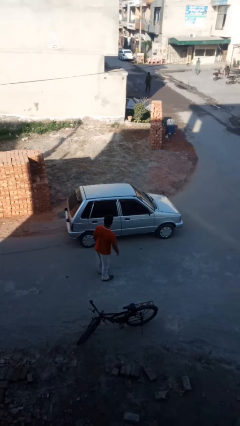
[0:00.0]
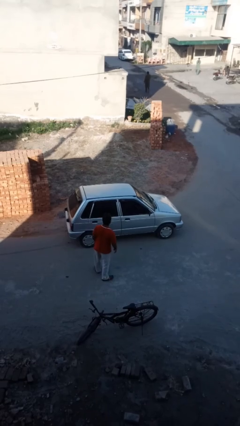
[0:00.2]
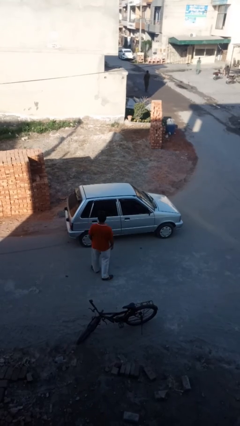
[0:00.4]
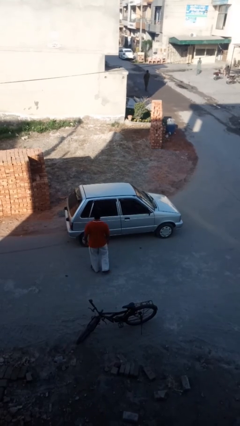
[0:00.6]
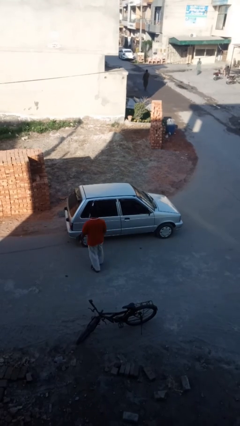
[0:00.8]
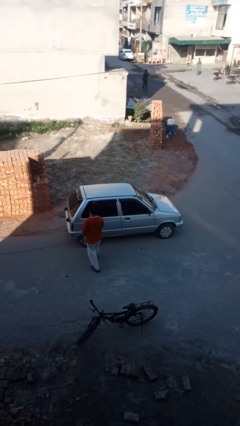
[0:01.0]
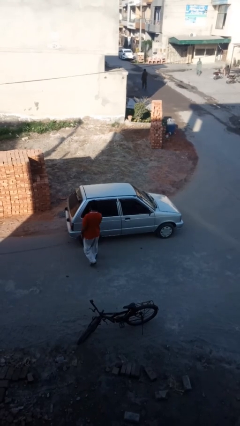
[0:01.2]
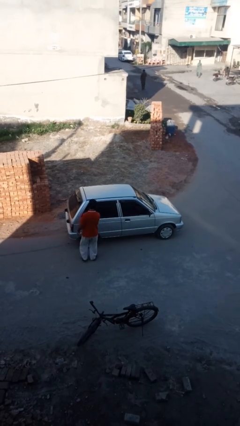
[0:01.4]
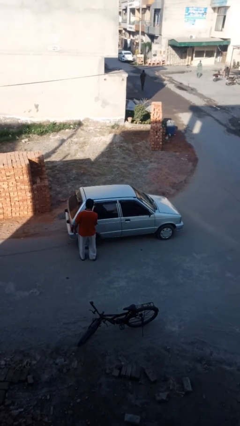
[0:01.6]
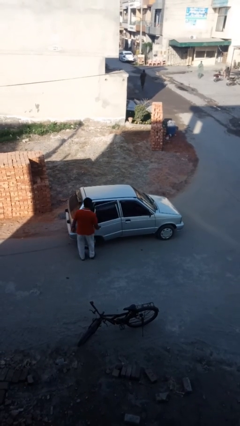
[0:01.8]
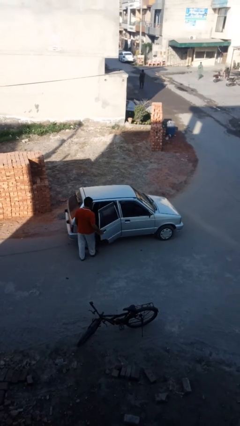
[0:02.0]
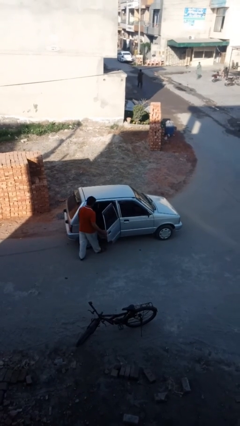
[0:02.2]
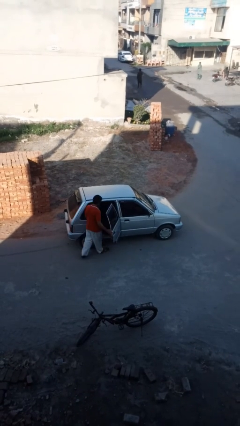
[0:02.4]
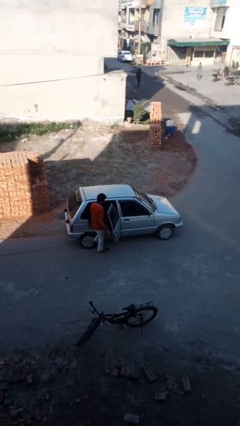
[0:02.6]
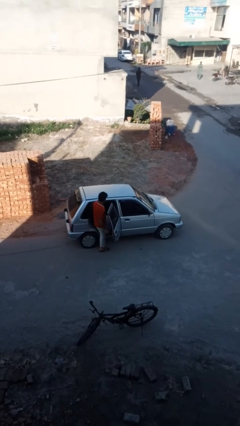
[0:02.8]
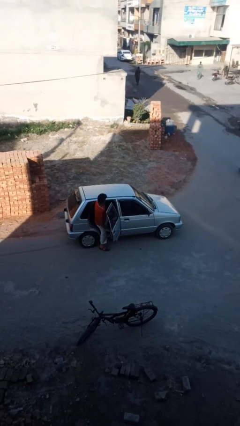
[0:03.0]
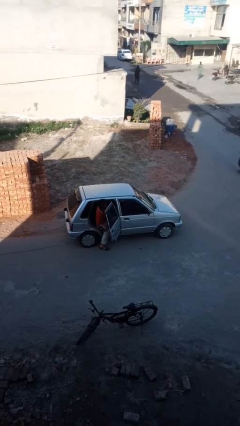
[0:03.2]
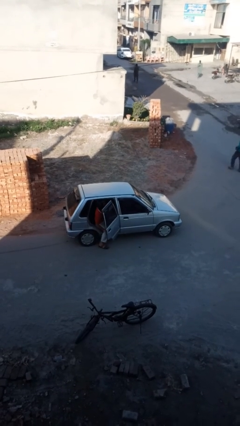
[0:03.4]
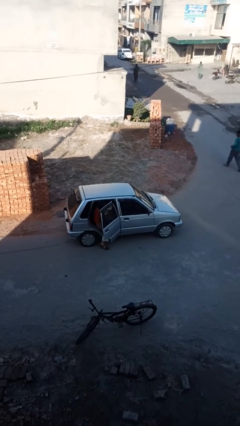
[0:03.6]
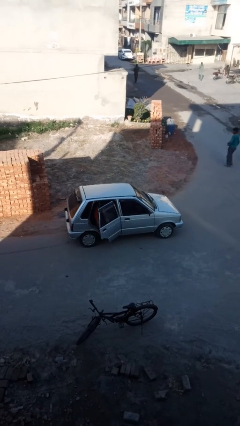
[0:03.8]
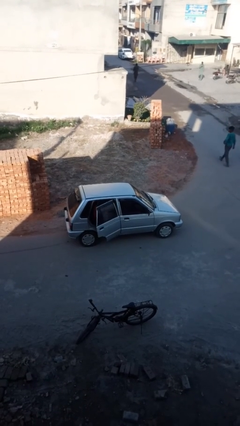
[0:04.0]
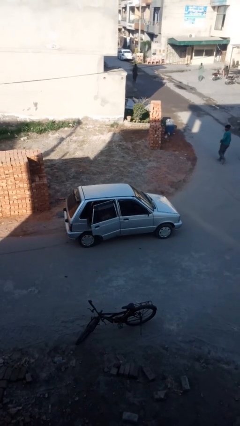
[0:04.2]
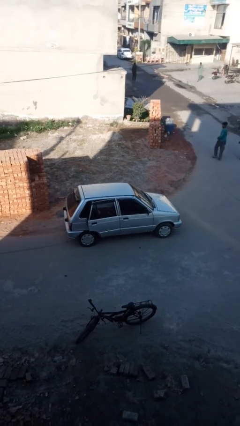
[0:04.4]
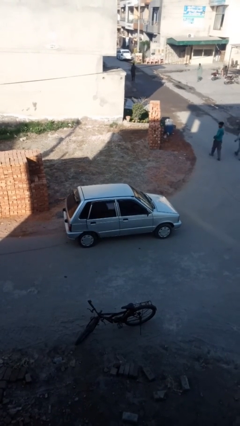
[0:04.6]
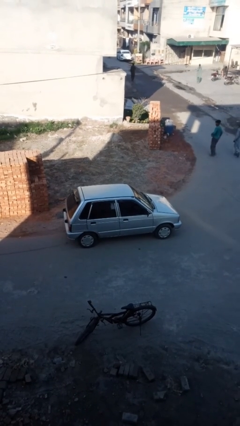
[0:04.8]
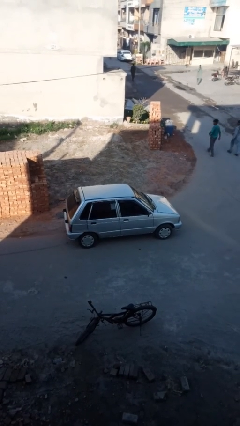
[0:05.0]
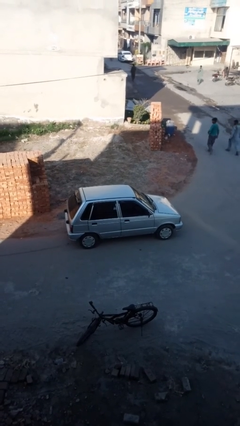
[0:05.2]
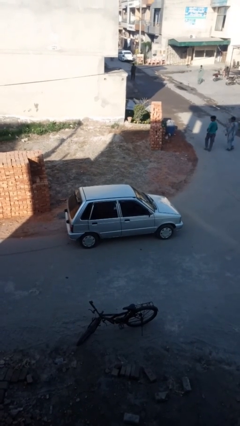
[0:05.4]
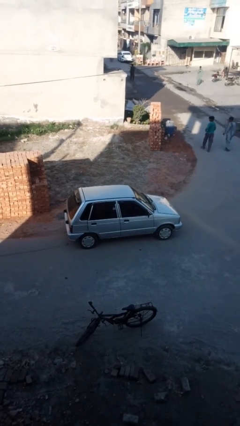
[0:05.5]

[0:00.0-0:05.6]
car picks up person

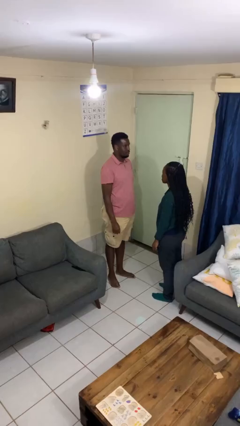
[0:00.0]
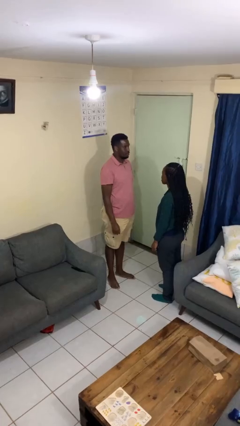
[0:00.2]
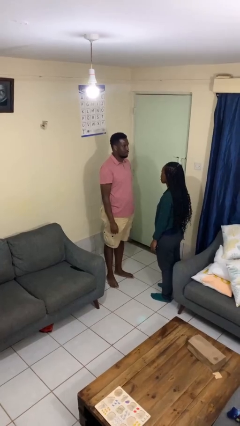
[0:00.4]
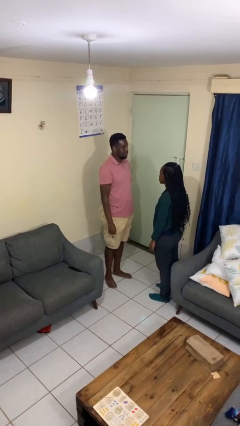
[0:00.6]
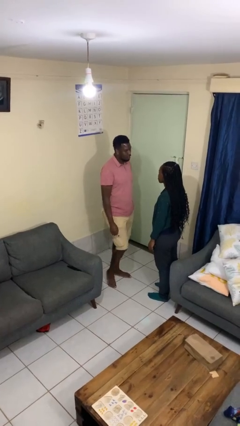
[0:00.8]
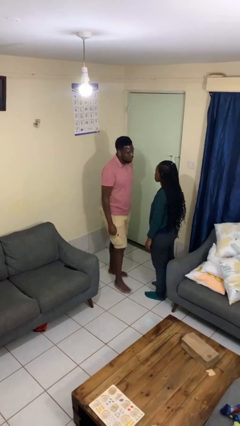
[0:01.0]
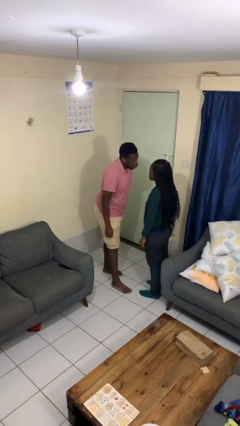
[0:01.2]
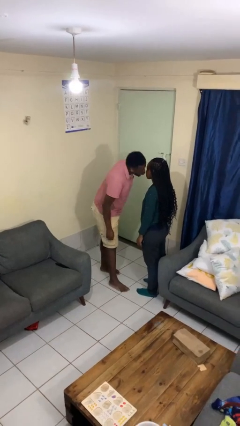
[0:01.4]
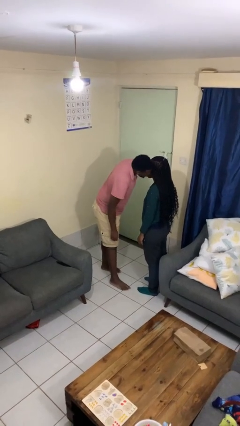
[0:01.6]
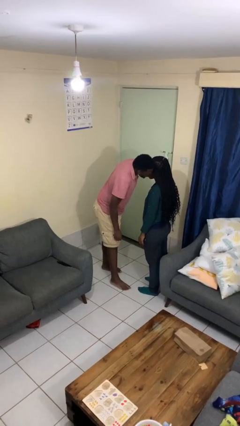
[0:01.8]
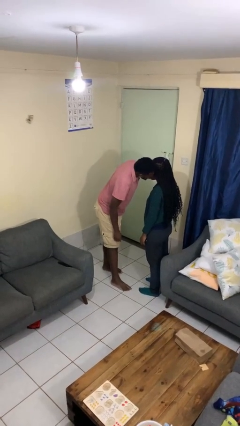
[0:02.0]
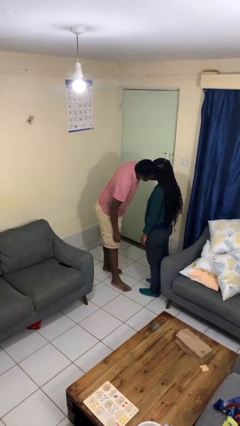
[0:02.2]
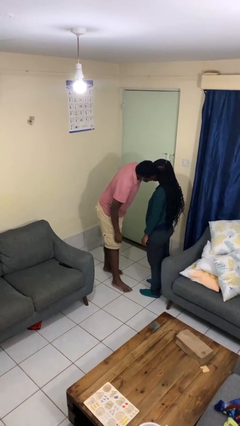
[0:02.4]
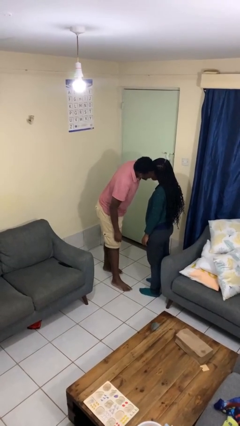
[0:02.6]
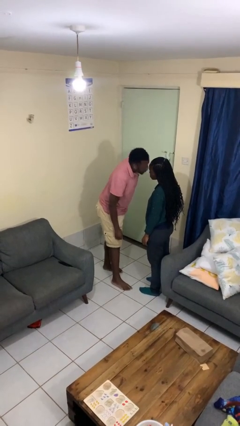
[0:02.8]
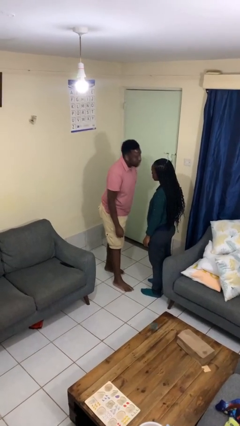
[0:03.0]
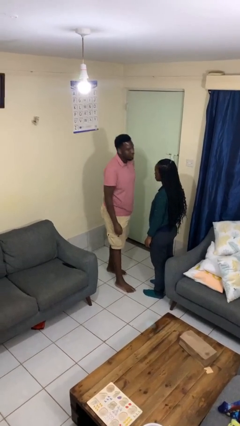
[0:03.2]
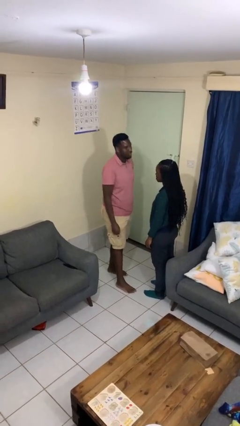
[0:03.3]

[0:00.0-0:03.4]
person kisses cheek of person

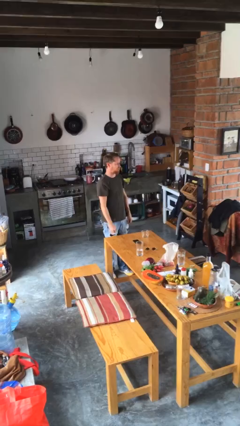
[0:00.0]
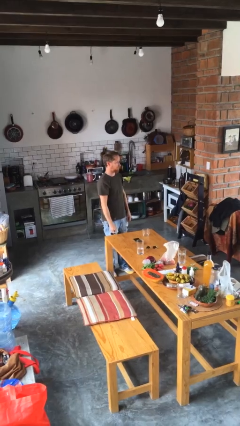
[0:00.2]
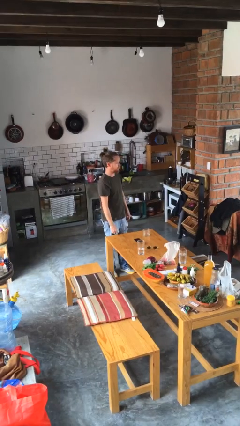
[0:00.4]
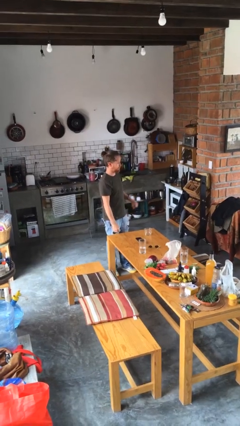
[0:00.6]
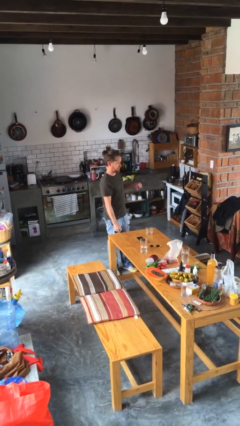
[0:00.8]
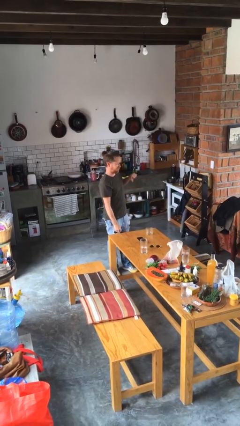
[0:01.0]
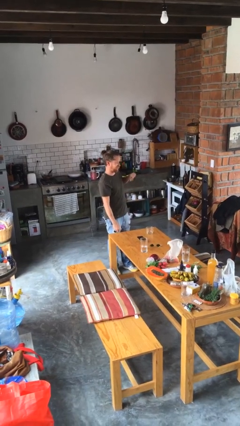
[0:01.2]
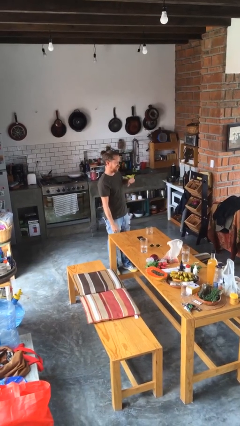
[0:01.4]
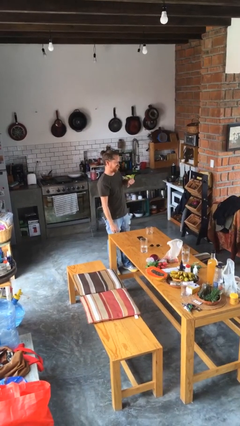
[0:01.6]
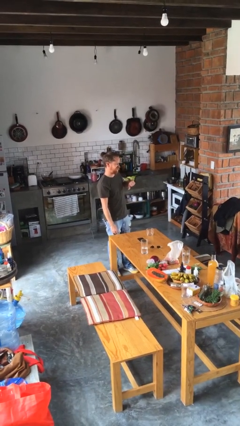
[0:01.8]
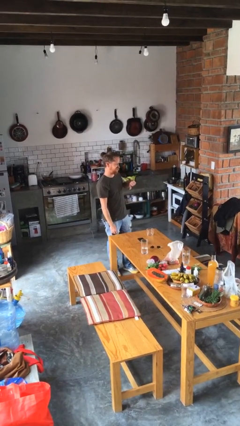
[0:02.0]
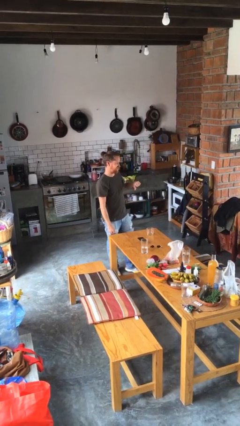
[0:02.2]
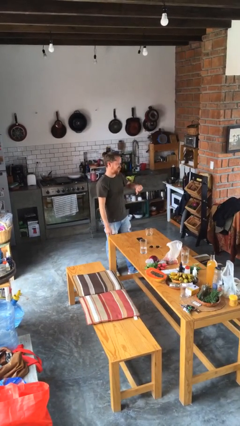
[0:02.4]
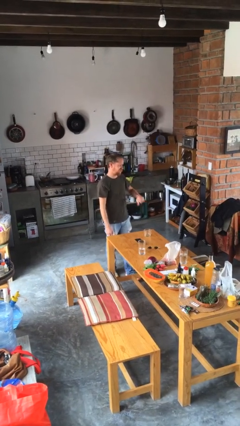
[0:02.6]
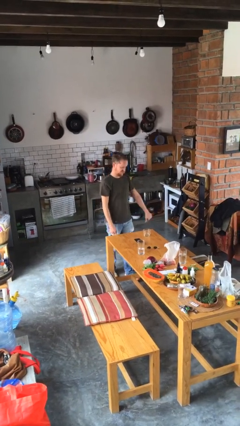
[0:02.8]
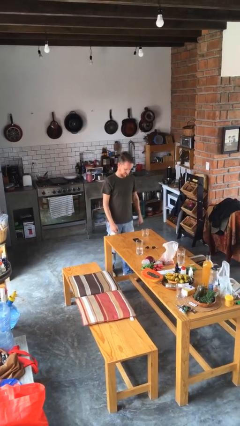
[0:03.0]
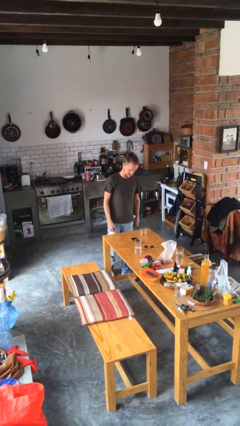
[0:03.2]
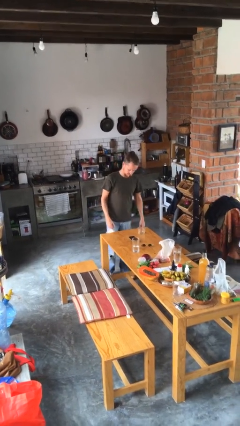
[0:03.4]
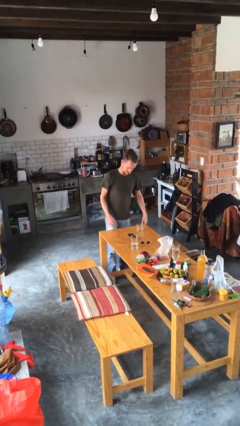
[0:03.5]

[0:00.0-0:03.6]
person gestures thumbs down

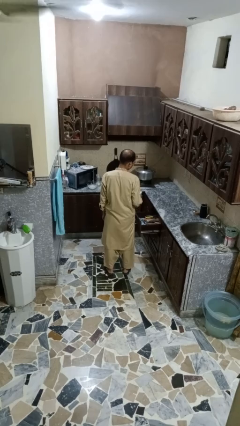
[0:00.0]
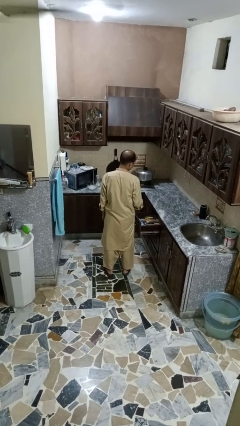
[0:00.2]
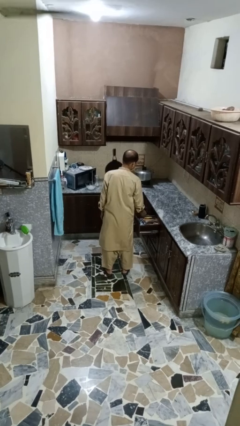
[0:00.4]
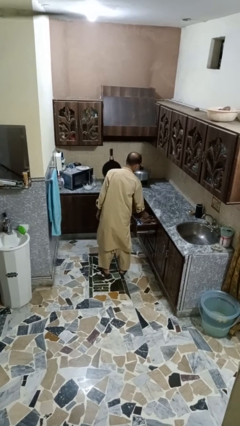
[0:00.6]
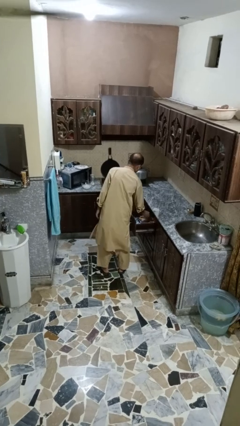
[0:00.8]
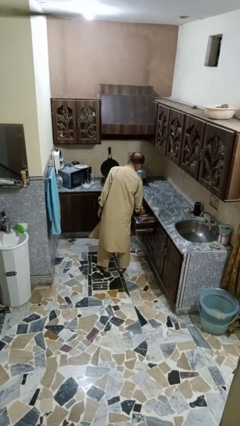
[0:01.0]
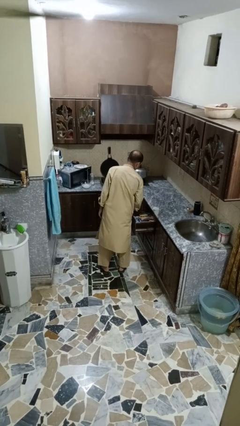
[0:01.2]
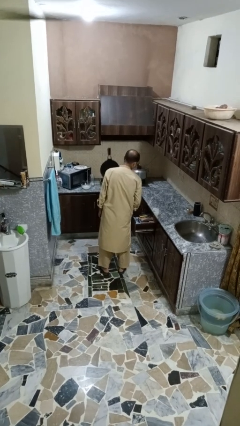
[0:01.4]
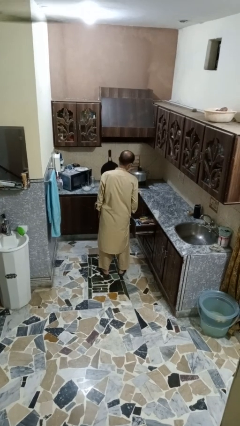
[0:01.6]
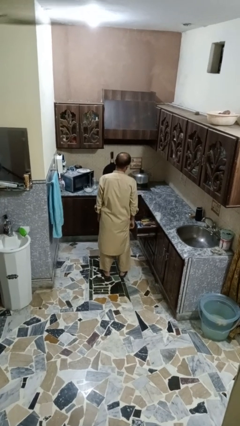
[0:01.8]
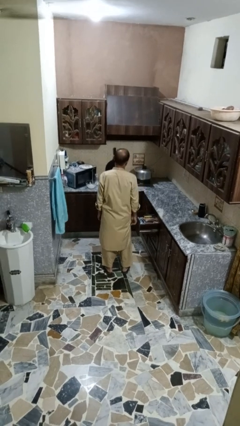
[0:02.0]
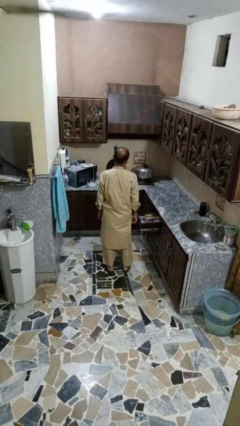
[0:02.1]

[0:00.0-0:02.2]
person puts object into kitchen drawer

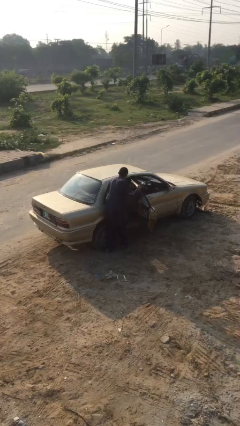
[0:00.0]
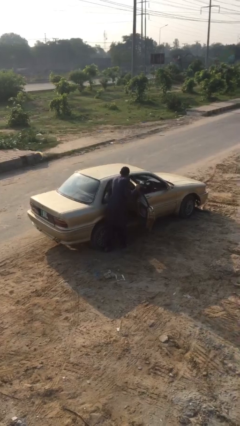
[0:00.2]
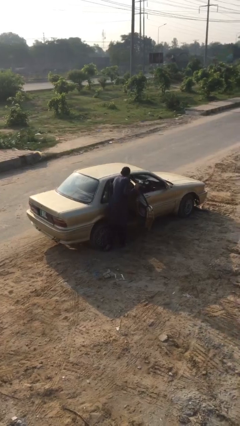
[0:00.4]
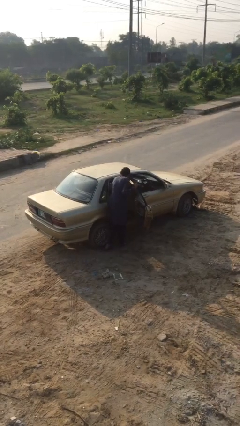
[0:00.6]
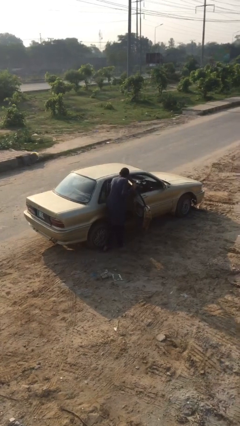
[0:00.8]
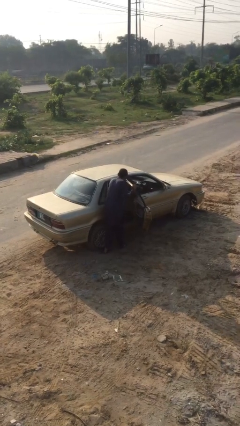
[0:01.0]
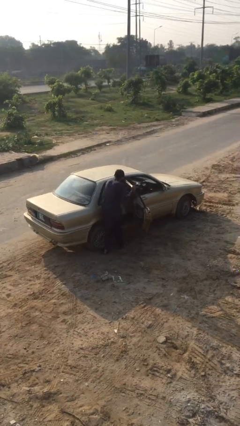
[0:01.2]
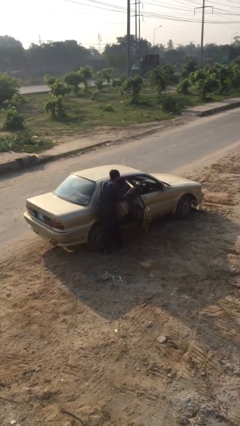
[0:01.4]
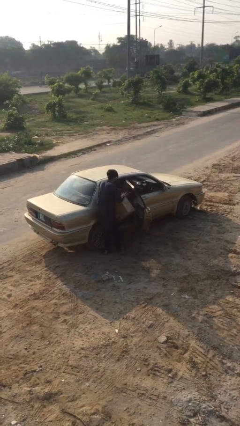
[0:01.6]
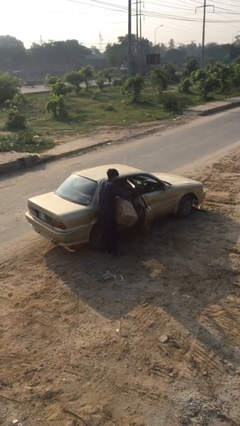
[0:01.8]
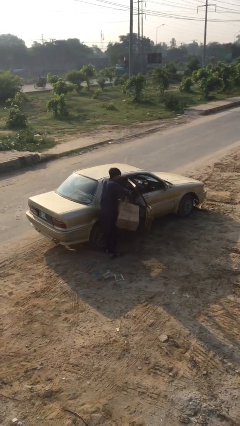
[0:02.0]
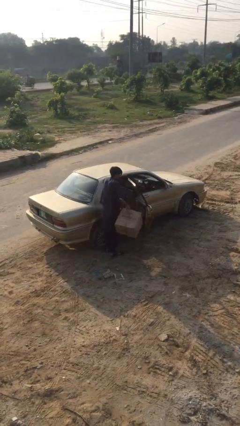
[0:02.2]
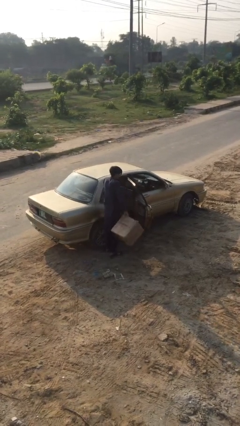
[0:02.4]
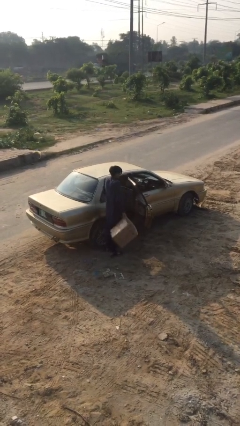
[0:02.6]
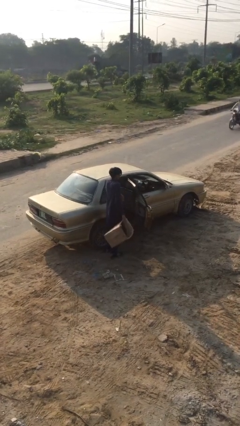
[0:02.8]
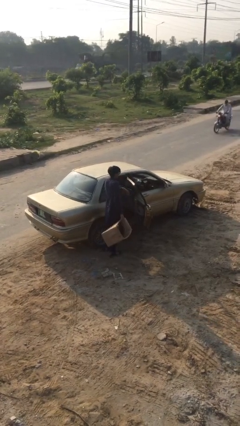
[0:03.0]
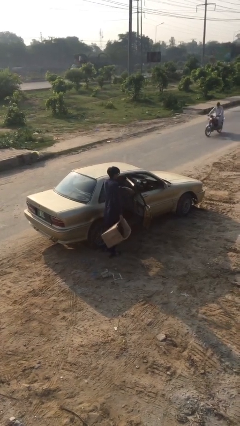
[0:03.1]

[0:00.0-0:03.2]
person unloads car
